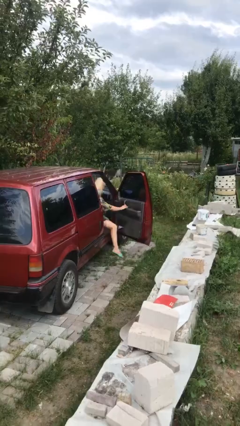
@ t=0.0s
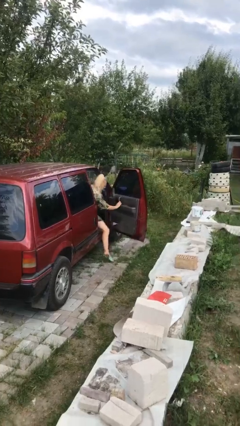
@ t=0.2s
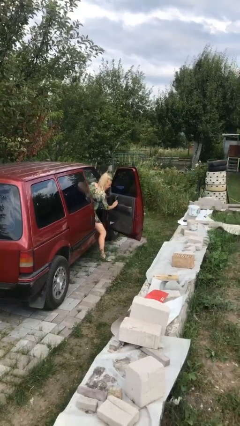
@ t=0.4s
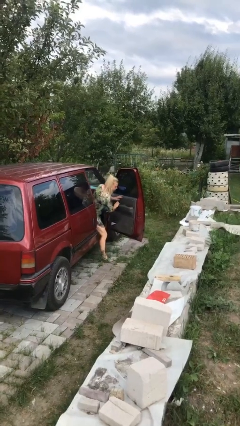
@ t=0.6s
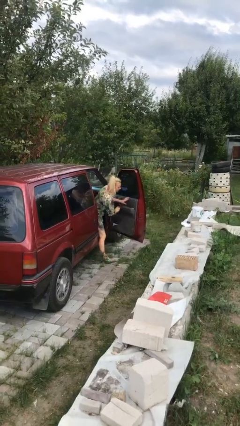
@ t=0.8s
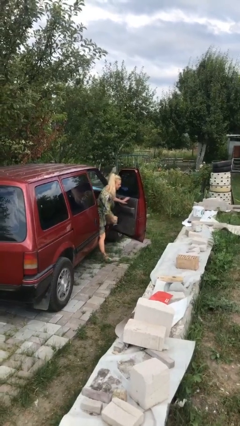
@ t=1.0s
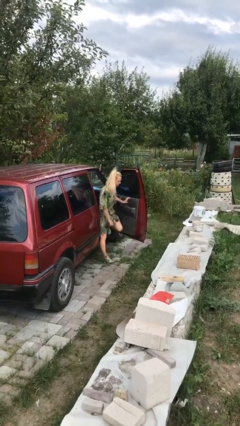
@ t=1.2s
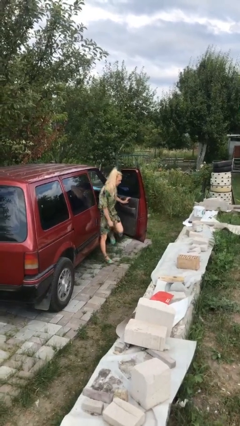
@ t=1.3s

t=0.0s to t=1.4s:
person exits car

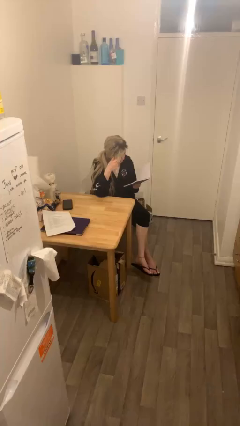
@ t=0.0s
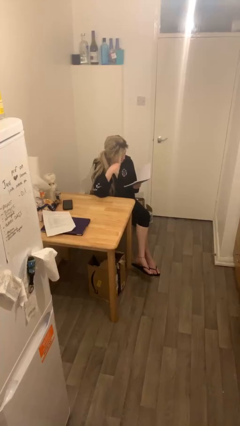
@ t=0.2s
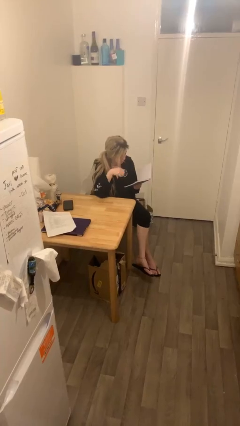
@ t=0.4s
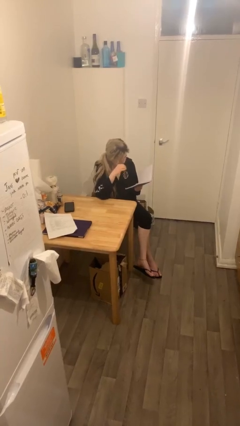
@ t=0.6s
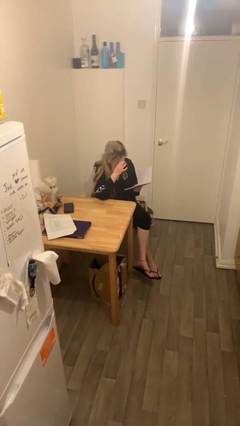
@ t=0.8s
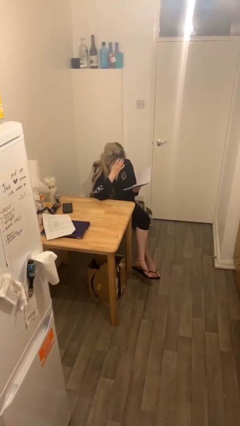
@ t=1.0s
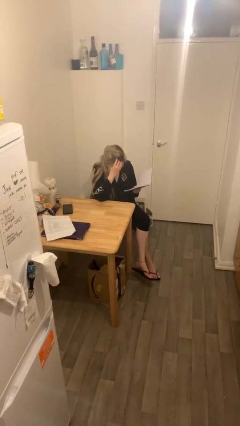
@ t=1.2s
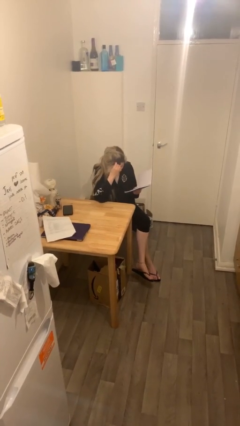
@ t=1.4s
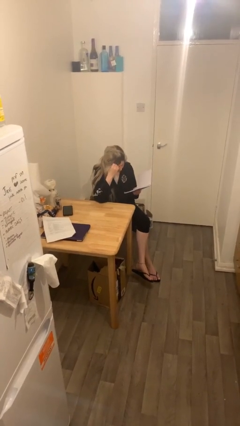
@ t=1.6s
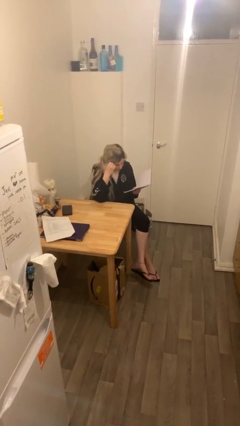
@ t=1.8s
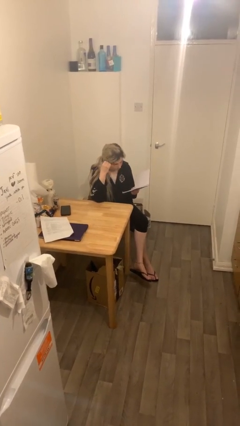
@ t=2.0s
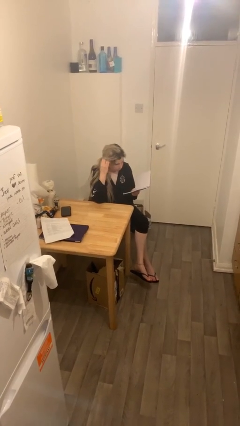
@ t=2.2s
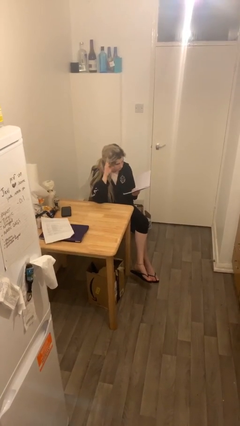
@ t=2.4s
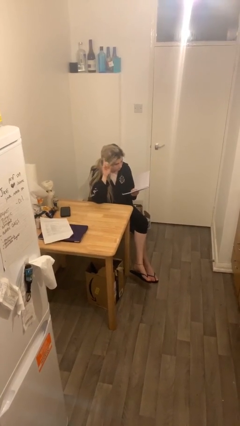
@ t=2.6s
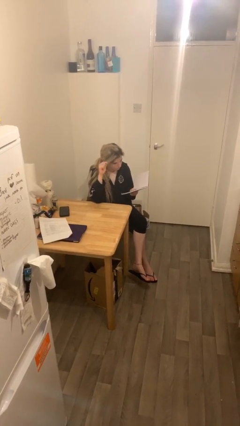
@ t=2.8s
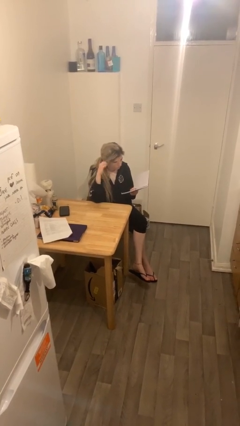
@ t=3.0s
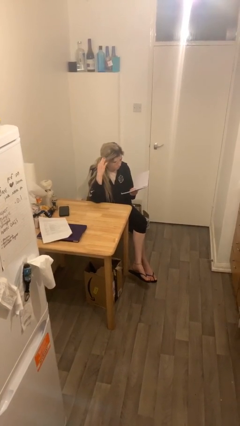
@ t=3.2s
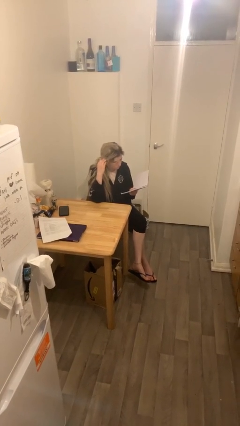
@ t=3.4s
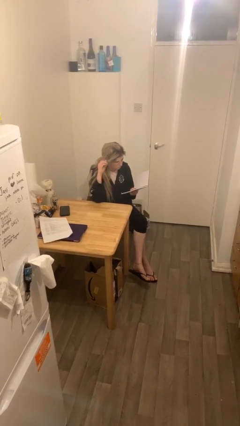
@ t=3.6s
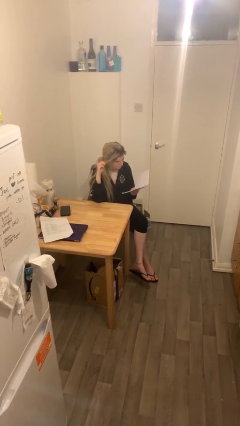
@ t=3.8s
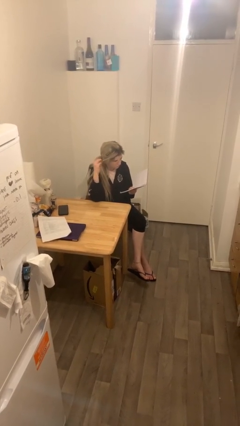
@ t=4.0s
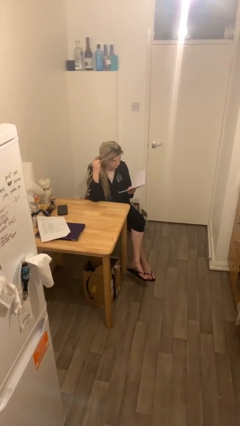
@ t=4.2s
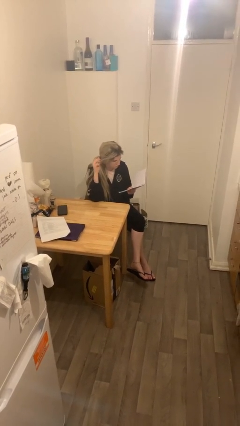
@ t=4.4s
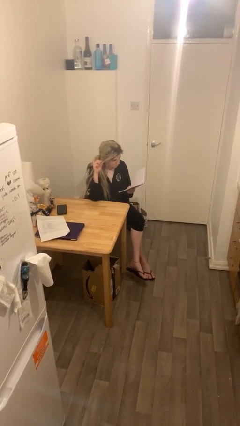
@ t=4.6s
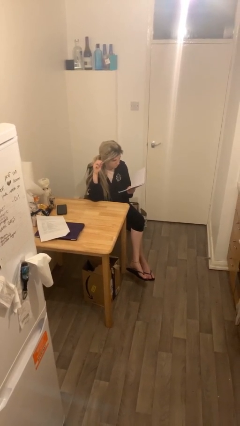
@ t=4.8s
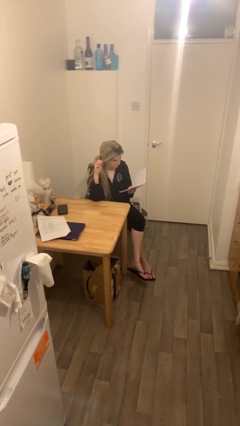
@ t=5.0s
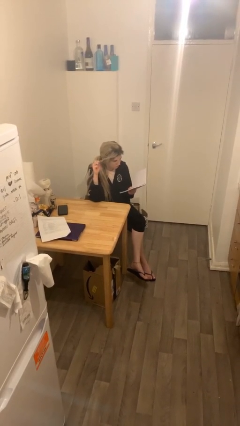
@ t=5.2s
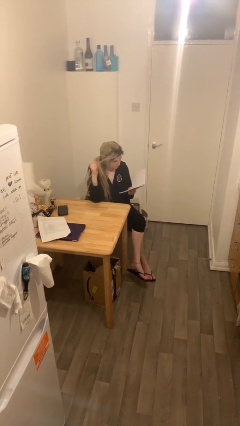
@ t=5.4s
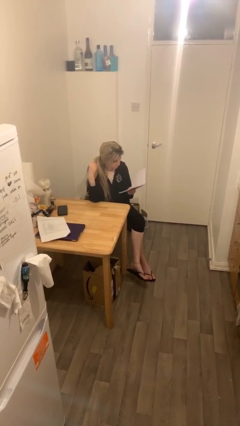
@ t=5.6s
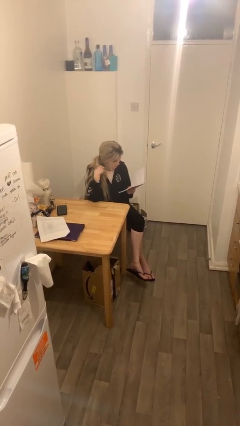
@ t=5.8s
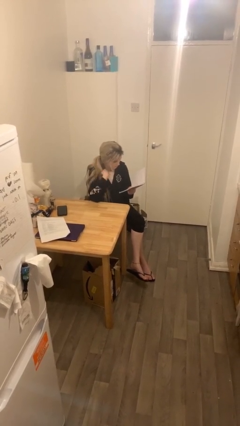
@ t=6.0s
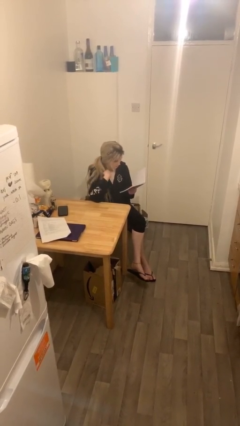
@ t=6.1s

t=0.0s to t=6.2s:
person reads document

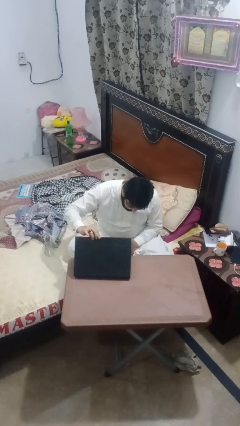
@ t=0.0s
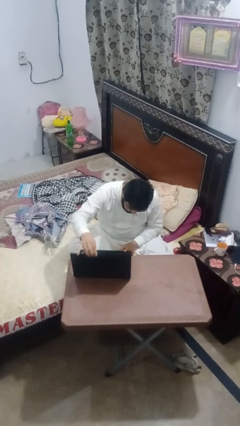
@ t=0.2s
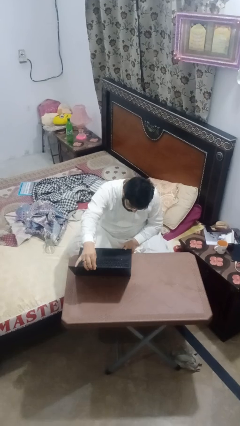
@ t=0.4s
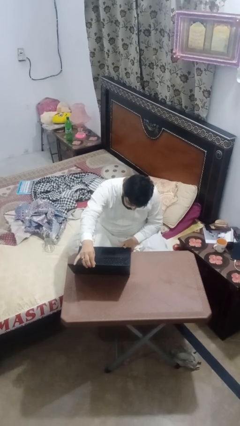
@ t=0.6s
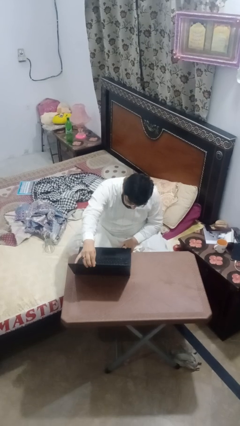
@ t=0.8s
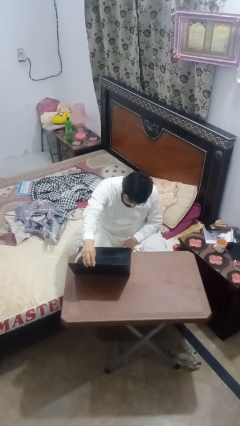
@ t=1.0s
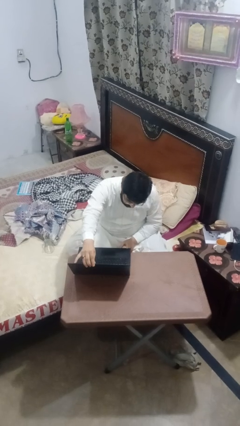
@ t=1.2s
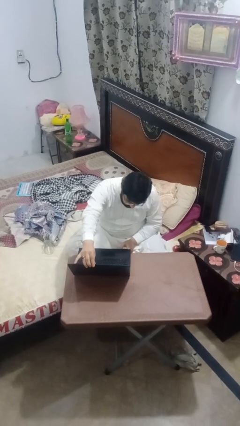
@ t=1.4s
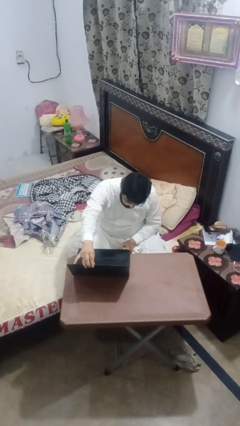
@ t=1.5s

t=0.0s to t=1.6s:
person opens laptop

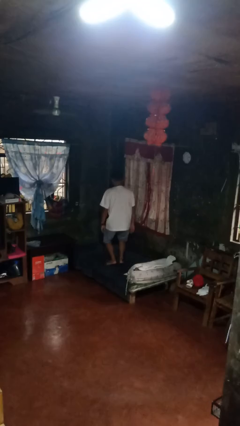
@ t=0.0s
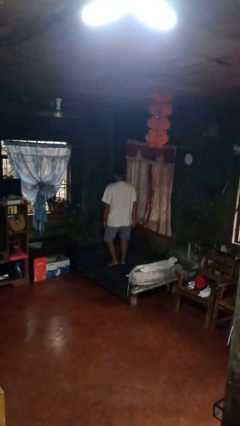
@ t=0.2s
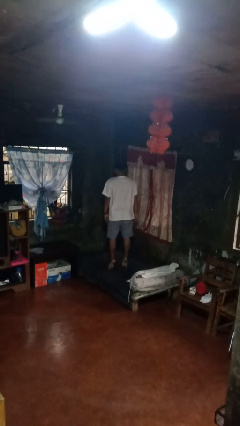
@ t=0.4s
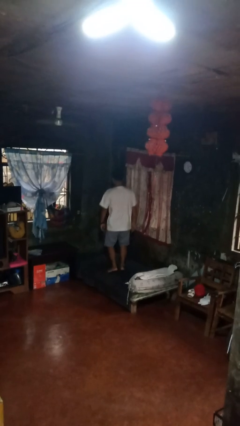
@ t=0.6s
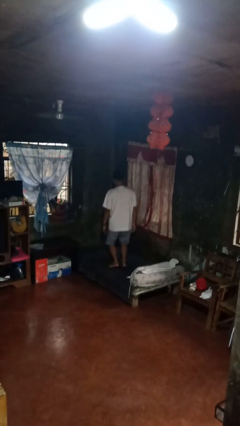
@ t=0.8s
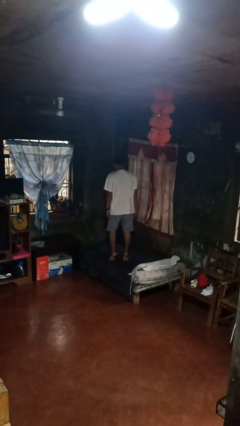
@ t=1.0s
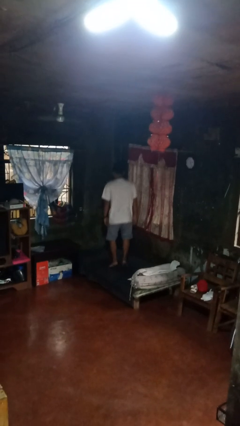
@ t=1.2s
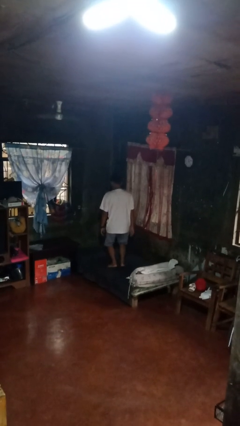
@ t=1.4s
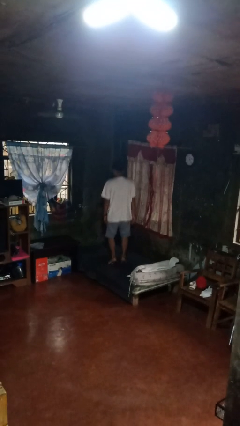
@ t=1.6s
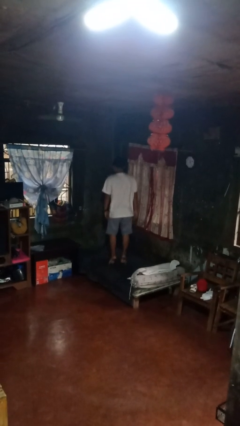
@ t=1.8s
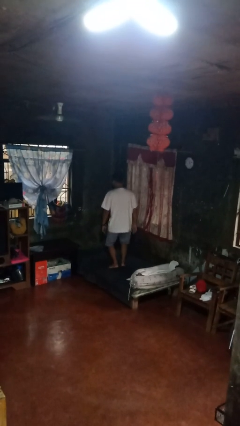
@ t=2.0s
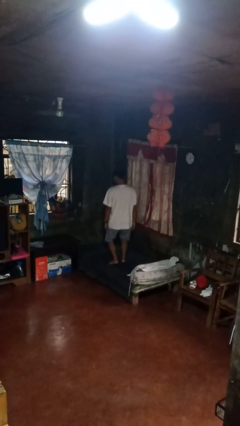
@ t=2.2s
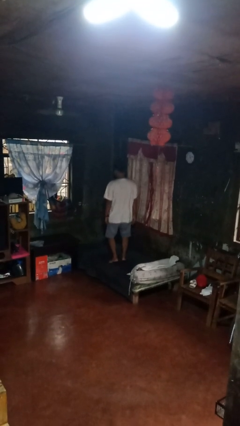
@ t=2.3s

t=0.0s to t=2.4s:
person jumps on bed

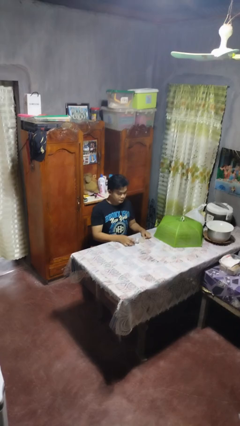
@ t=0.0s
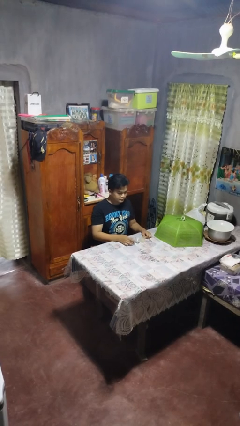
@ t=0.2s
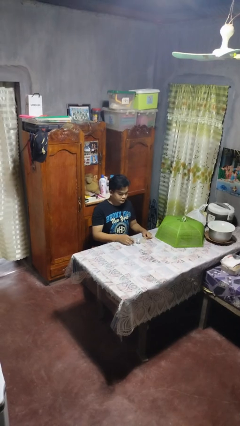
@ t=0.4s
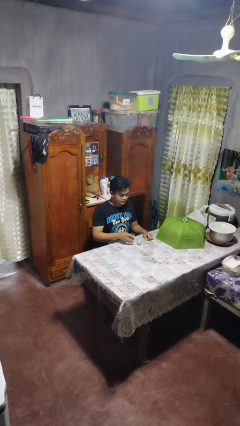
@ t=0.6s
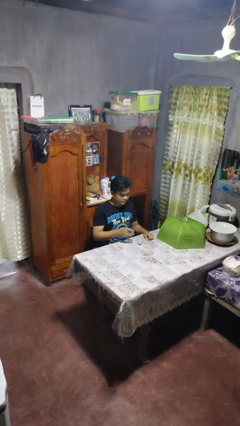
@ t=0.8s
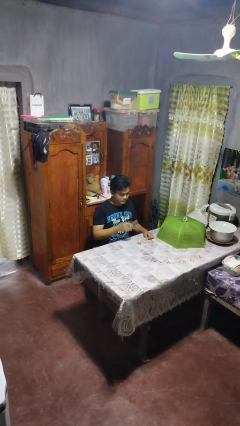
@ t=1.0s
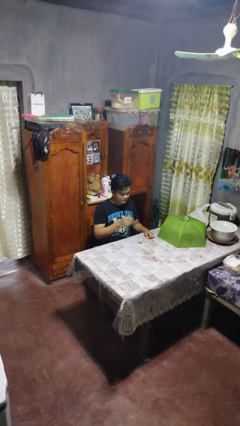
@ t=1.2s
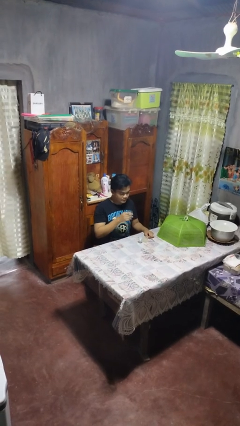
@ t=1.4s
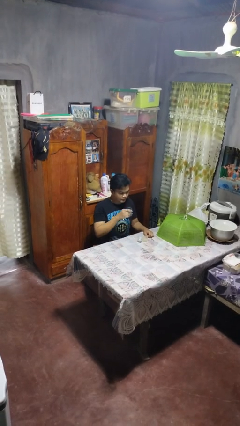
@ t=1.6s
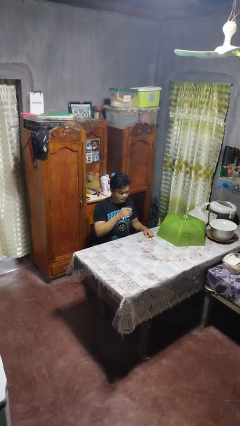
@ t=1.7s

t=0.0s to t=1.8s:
person picks up object from table

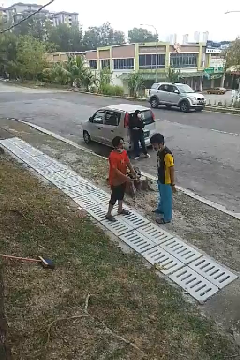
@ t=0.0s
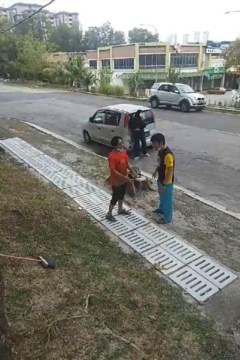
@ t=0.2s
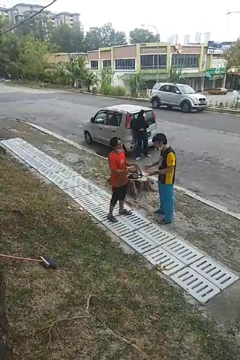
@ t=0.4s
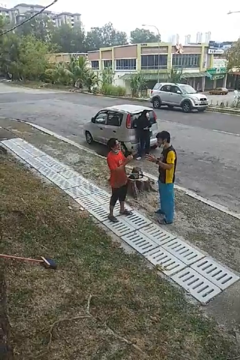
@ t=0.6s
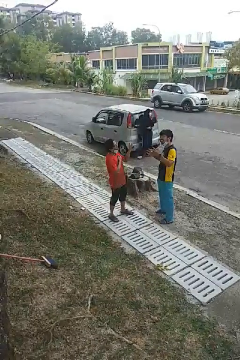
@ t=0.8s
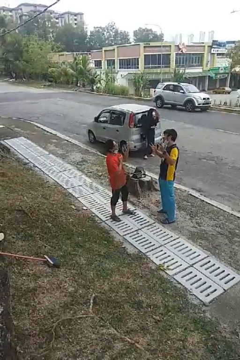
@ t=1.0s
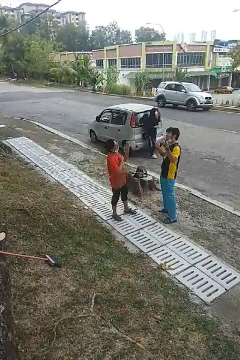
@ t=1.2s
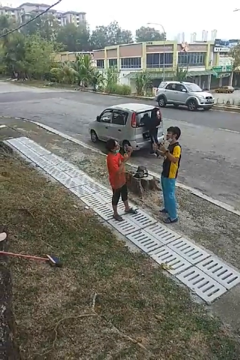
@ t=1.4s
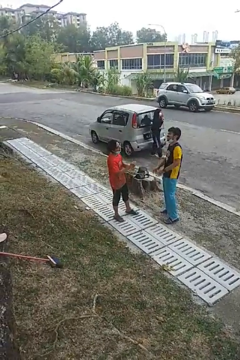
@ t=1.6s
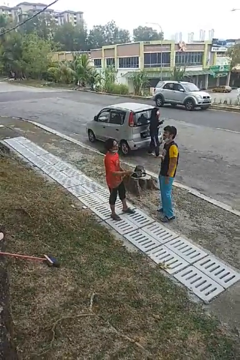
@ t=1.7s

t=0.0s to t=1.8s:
person laughs with person

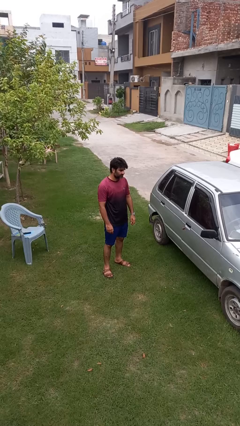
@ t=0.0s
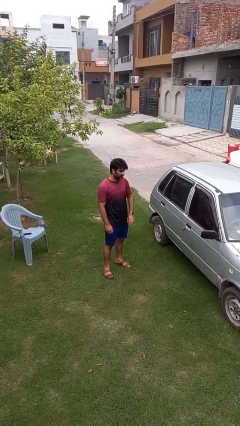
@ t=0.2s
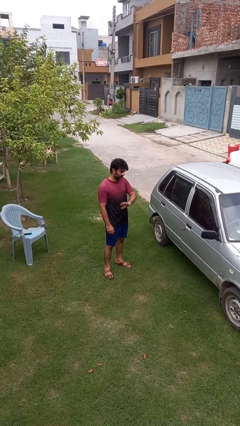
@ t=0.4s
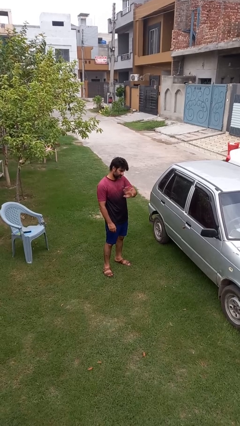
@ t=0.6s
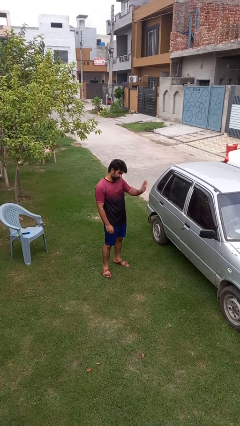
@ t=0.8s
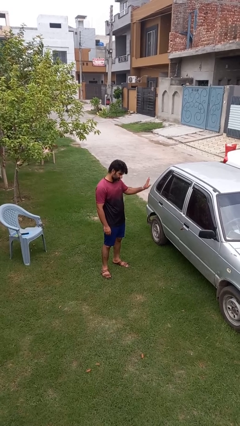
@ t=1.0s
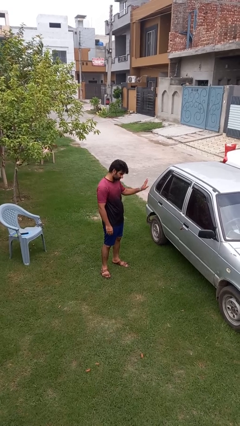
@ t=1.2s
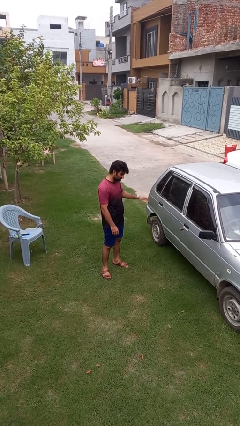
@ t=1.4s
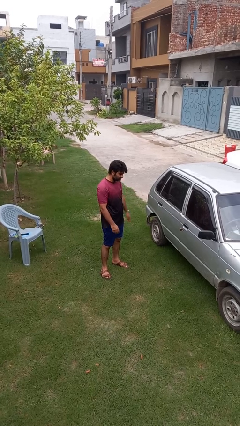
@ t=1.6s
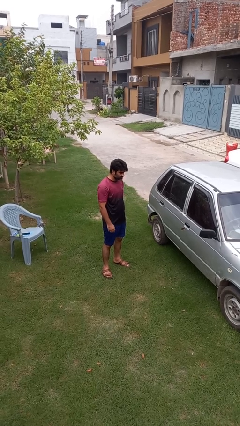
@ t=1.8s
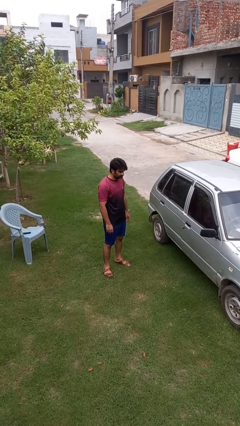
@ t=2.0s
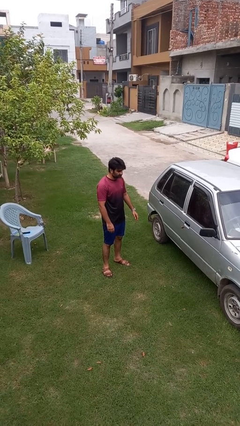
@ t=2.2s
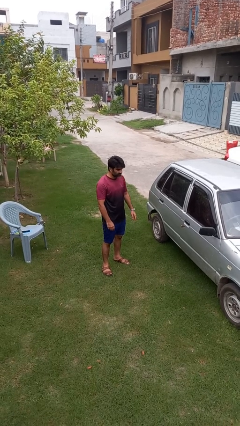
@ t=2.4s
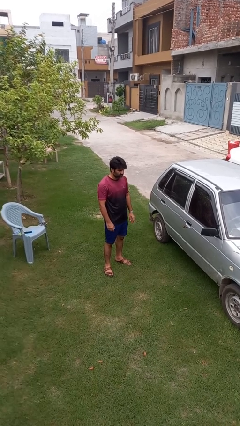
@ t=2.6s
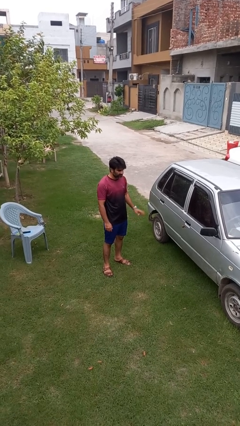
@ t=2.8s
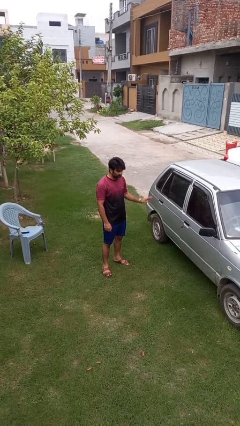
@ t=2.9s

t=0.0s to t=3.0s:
person gestures swipe left
